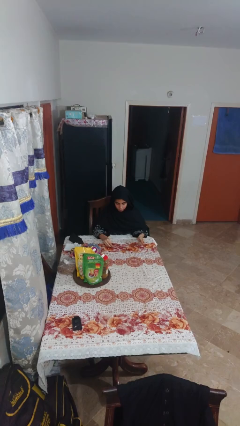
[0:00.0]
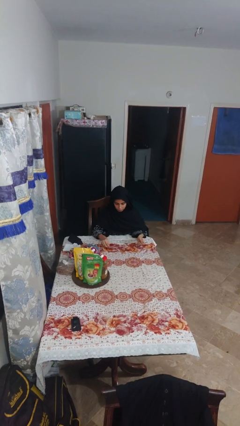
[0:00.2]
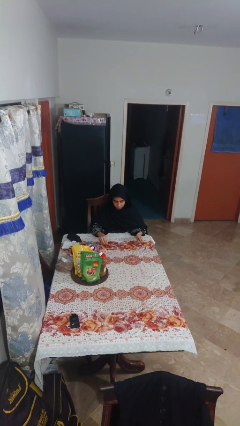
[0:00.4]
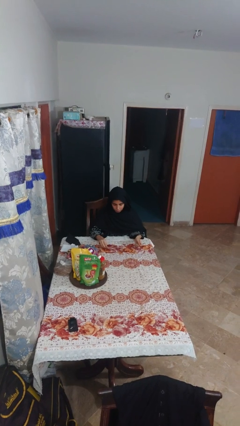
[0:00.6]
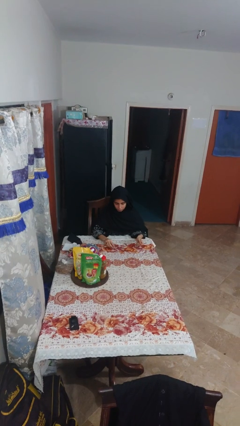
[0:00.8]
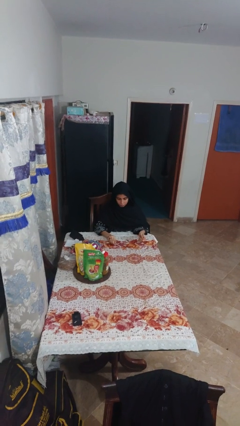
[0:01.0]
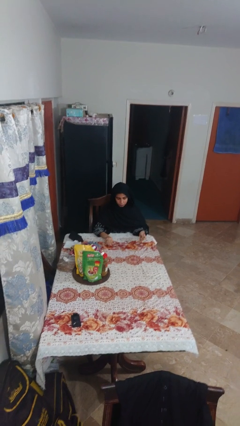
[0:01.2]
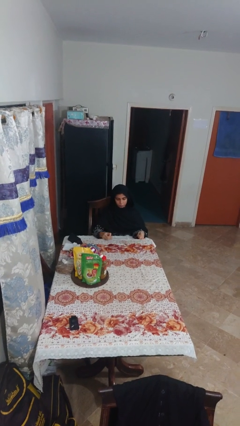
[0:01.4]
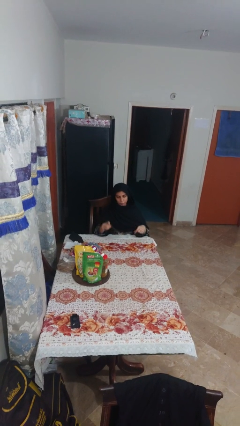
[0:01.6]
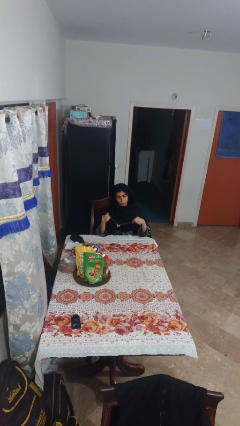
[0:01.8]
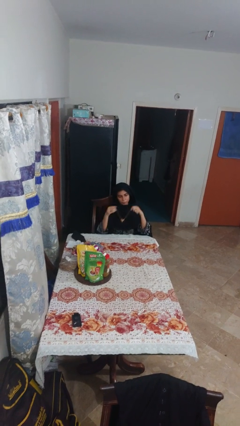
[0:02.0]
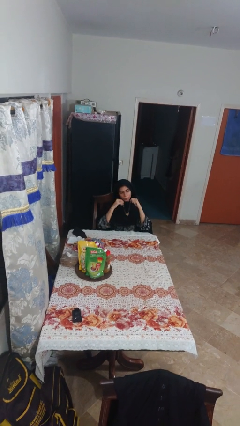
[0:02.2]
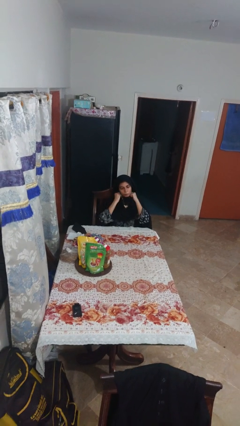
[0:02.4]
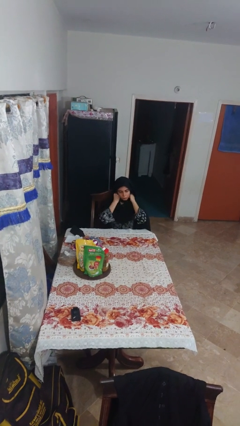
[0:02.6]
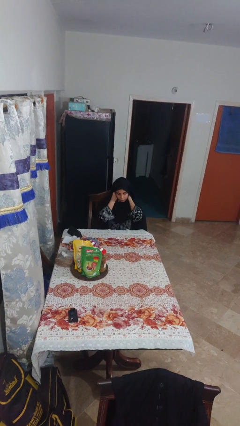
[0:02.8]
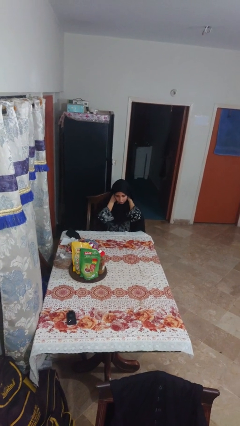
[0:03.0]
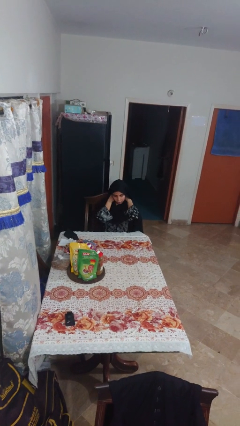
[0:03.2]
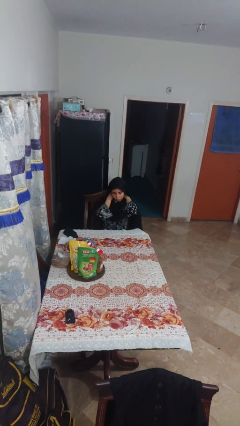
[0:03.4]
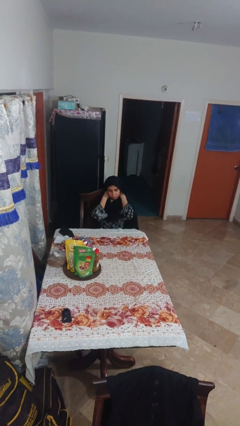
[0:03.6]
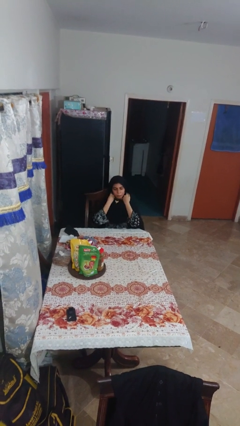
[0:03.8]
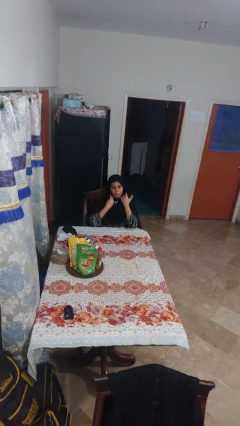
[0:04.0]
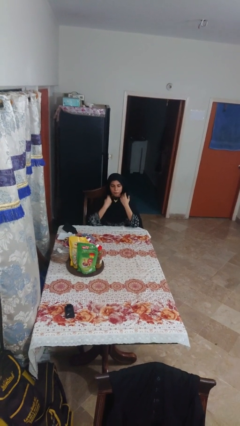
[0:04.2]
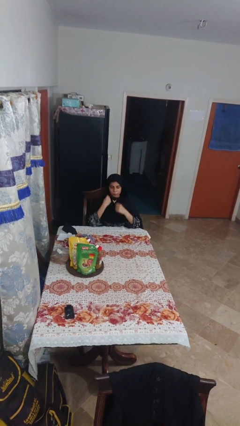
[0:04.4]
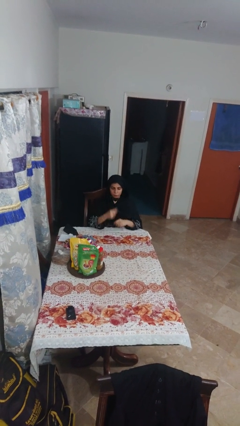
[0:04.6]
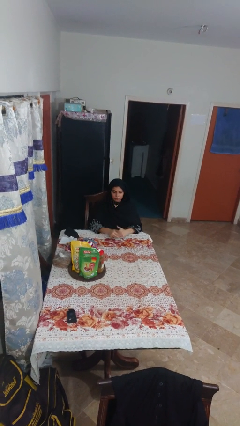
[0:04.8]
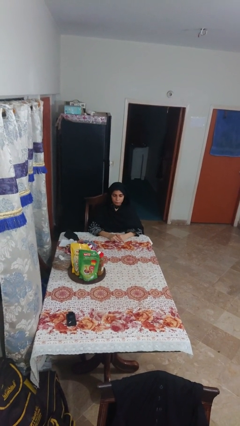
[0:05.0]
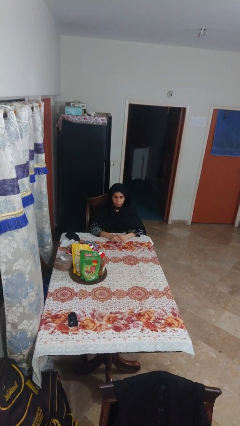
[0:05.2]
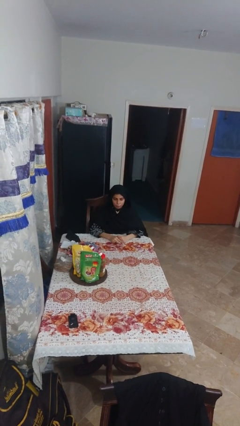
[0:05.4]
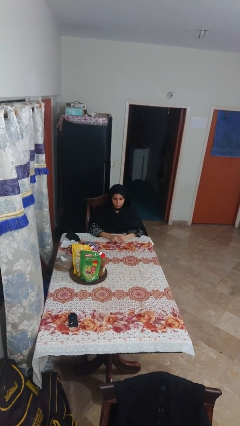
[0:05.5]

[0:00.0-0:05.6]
person puts on necklace

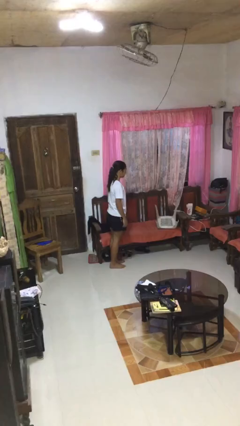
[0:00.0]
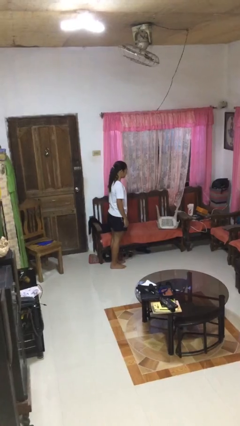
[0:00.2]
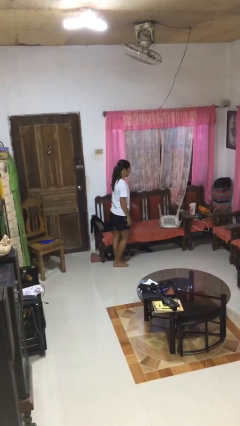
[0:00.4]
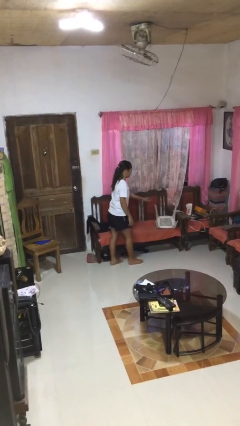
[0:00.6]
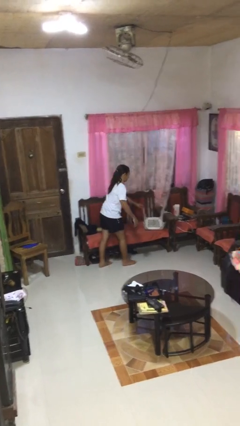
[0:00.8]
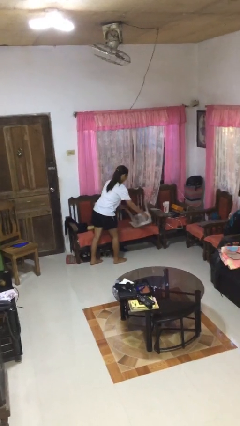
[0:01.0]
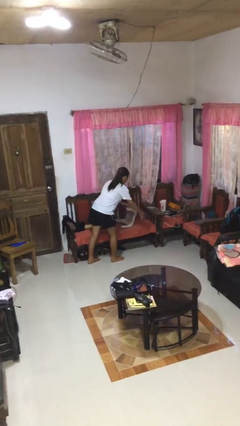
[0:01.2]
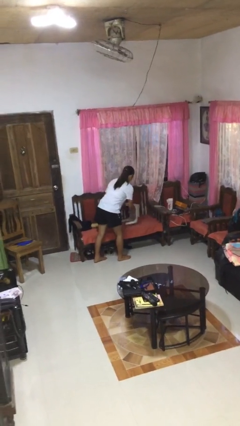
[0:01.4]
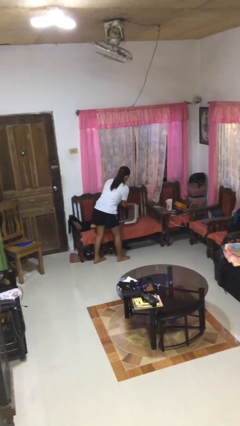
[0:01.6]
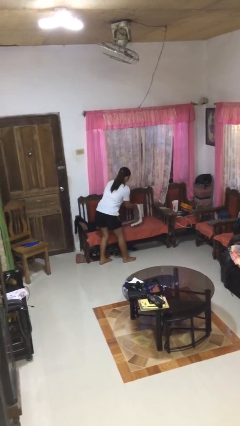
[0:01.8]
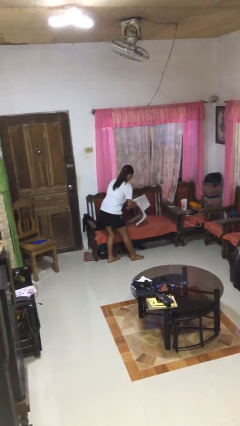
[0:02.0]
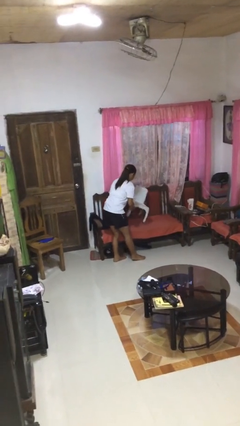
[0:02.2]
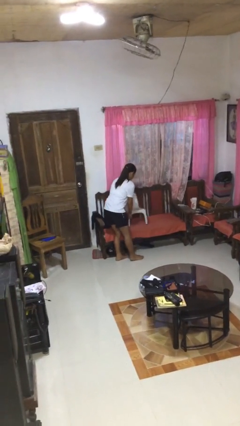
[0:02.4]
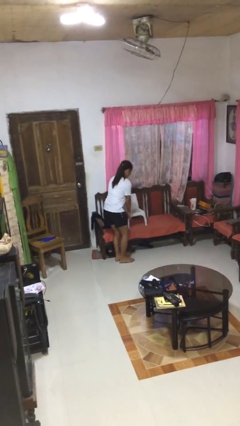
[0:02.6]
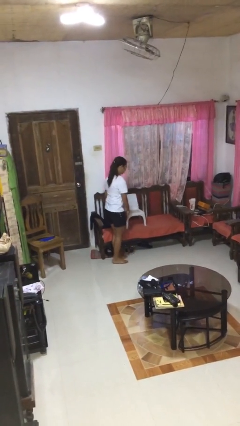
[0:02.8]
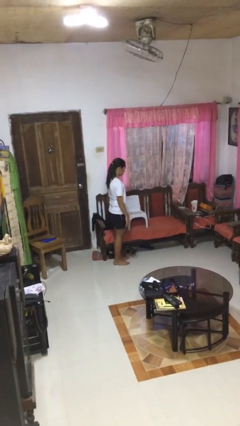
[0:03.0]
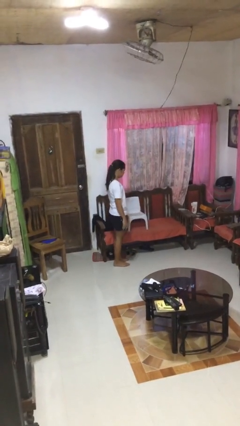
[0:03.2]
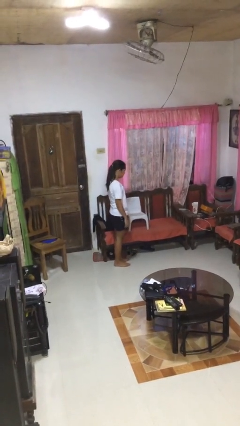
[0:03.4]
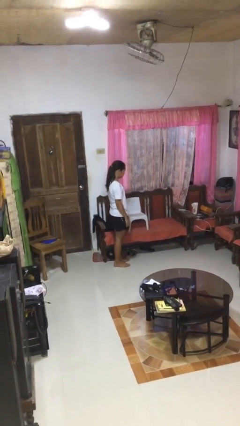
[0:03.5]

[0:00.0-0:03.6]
person sets upright furniture

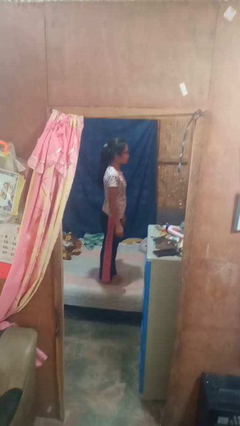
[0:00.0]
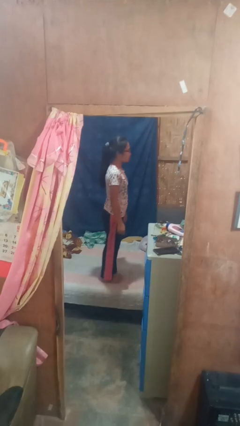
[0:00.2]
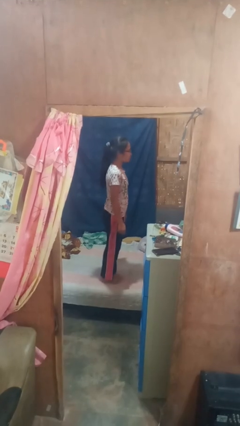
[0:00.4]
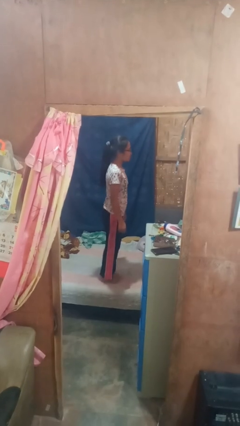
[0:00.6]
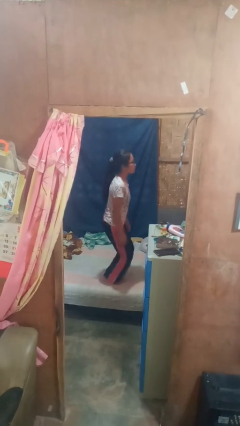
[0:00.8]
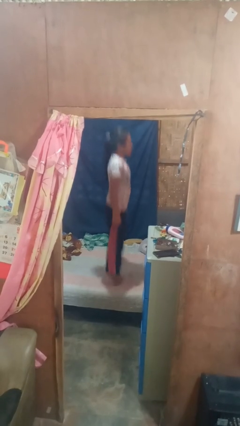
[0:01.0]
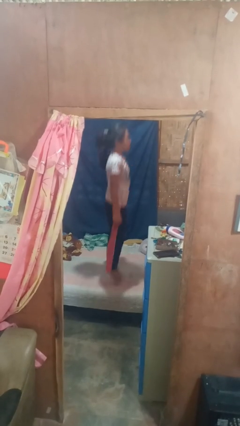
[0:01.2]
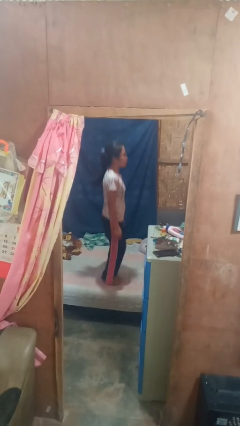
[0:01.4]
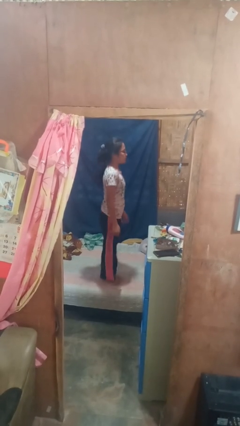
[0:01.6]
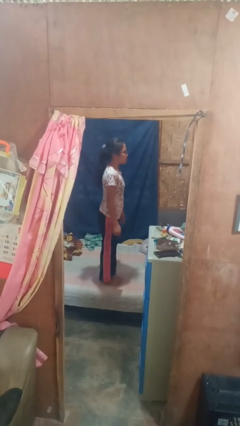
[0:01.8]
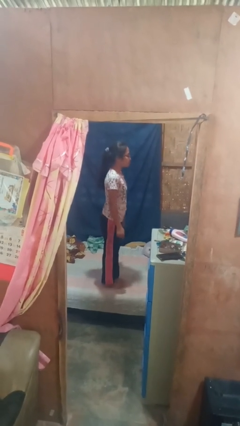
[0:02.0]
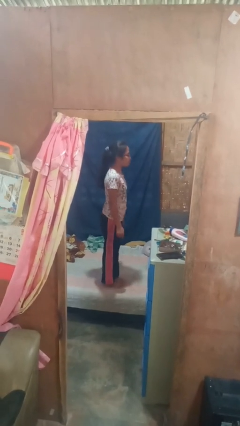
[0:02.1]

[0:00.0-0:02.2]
person jumps on bed

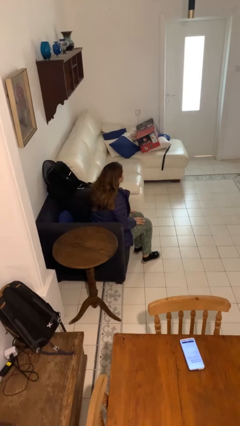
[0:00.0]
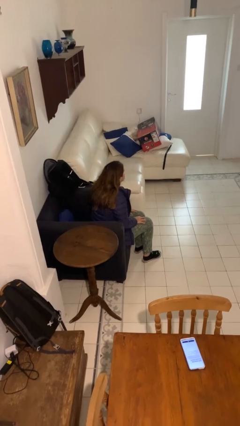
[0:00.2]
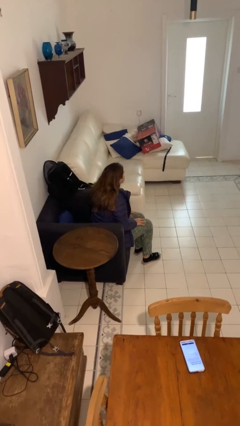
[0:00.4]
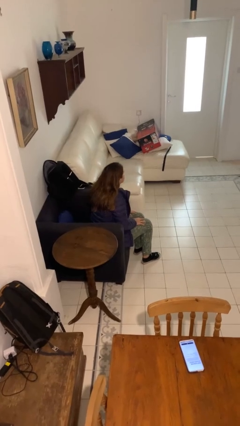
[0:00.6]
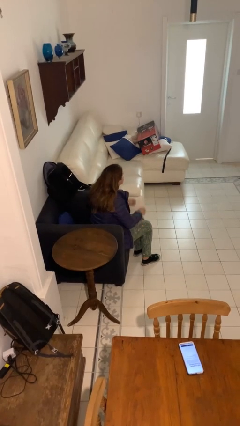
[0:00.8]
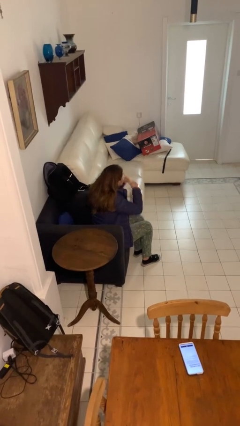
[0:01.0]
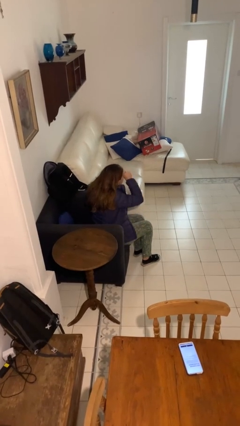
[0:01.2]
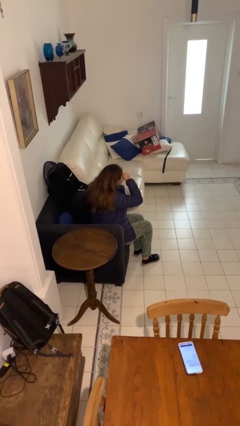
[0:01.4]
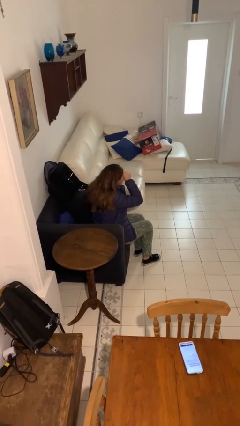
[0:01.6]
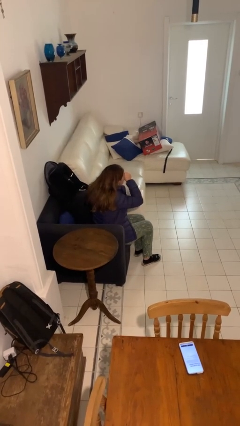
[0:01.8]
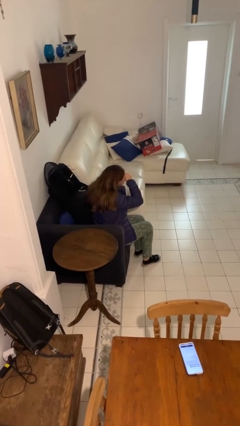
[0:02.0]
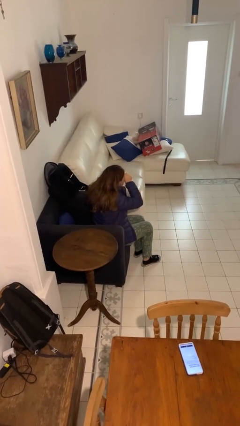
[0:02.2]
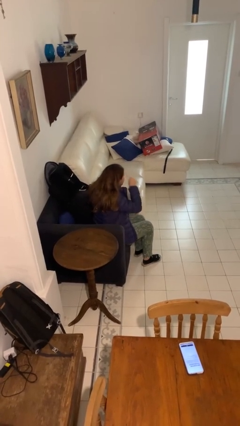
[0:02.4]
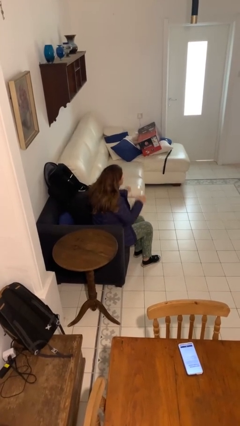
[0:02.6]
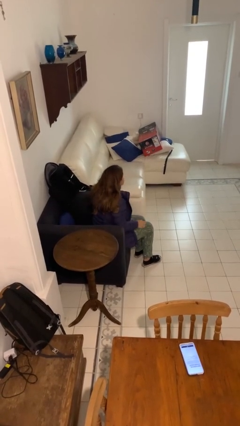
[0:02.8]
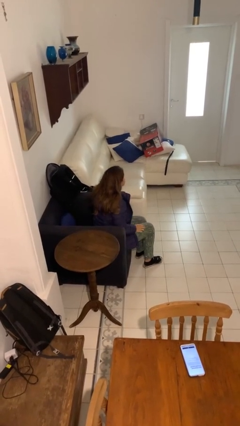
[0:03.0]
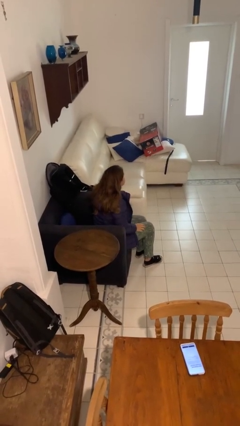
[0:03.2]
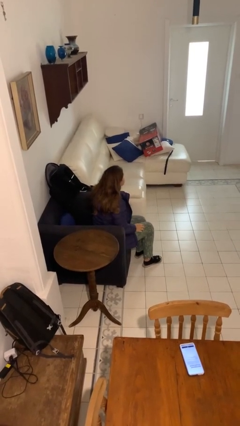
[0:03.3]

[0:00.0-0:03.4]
person rubs eyes

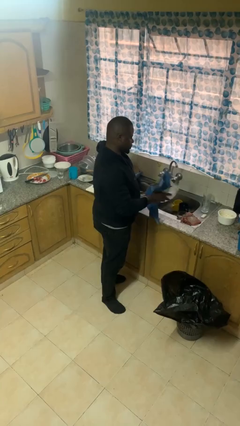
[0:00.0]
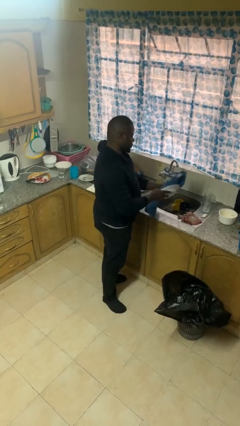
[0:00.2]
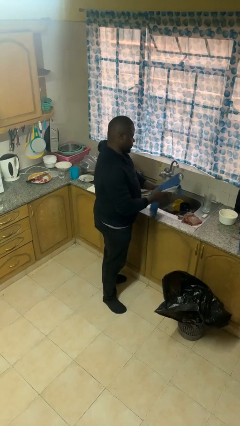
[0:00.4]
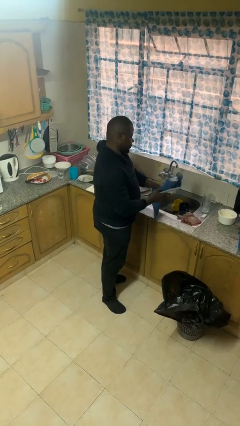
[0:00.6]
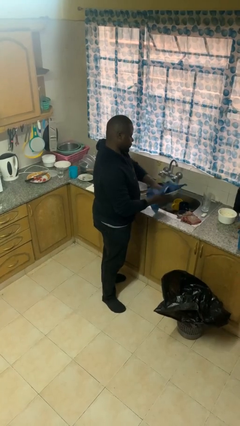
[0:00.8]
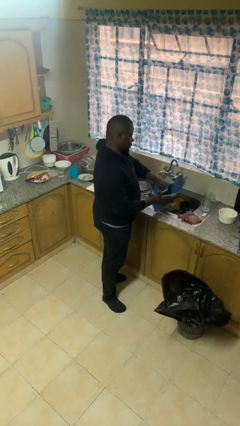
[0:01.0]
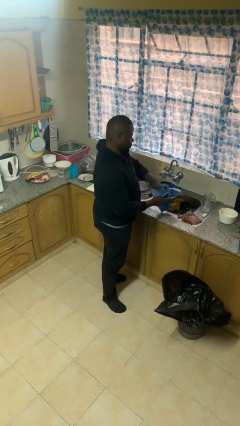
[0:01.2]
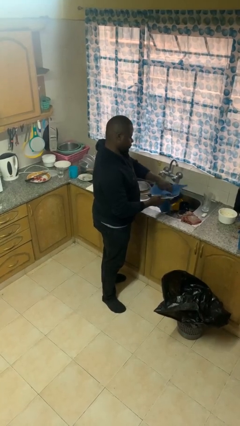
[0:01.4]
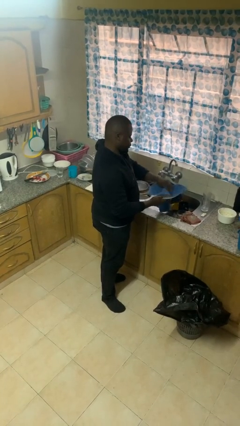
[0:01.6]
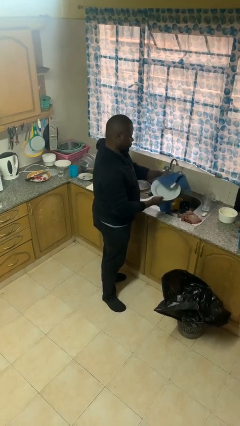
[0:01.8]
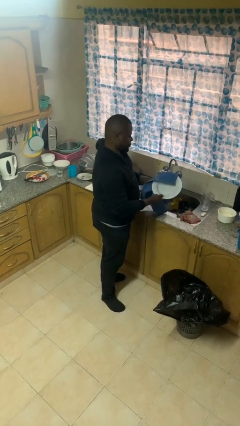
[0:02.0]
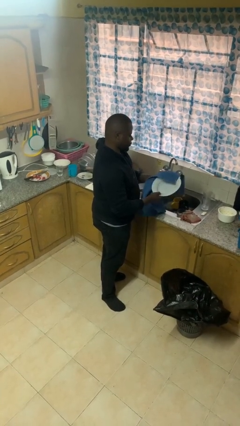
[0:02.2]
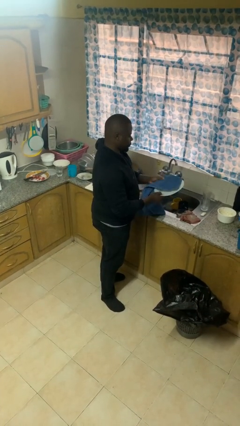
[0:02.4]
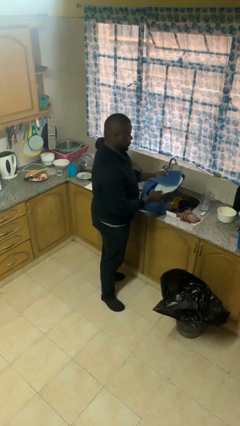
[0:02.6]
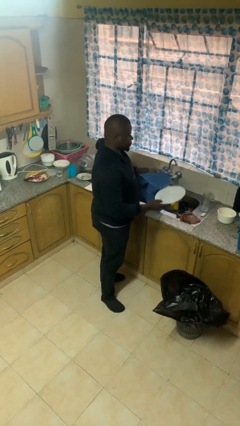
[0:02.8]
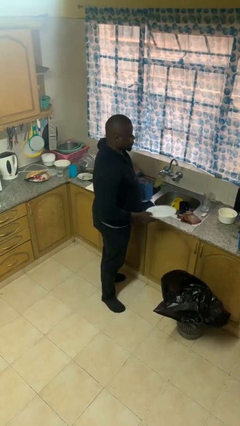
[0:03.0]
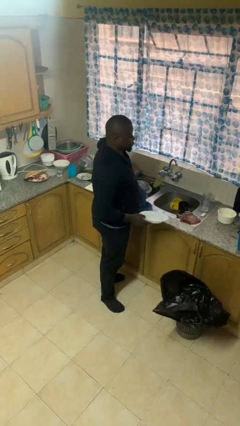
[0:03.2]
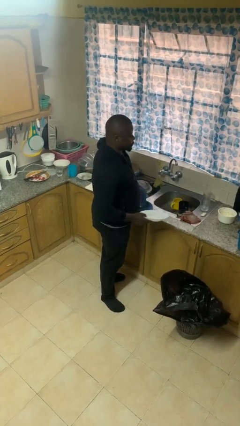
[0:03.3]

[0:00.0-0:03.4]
person dries dish
